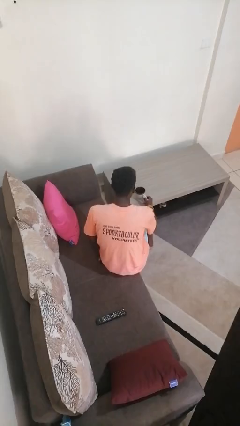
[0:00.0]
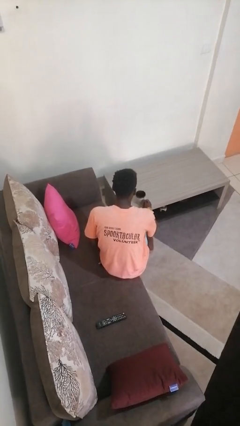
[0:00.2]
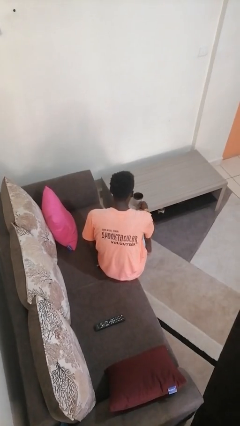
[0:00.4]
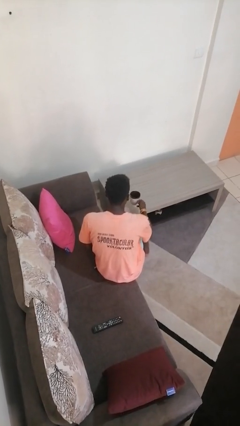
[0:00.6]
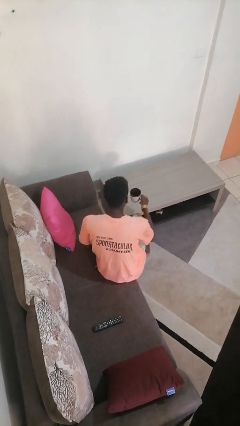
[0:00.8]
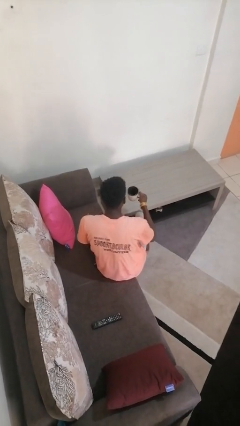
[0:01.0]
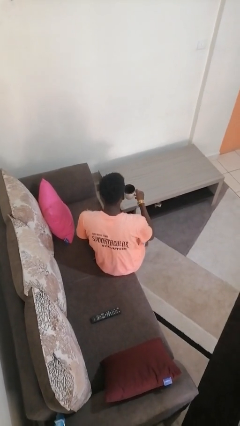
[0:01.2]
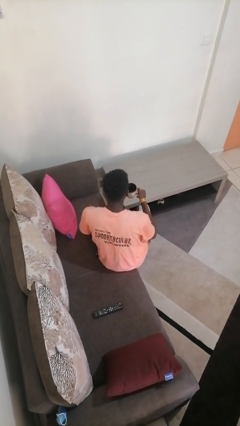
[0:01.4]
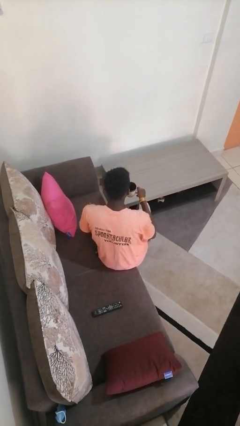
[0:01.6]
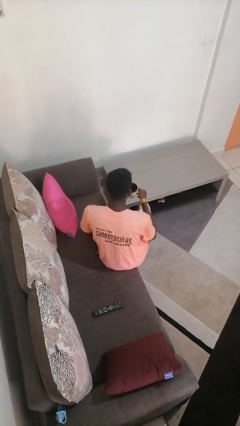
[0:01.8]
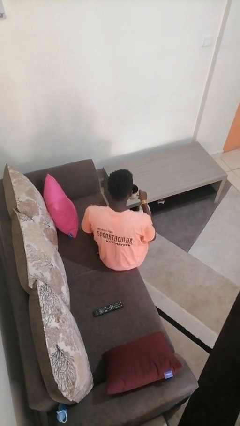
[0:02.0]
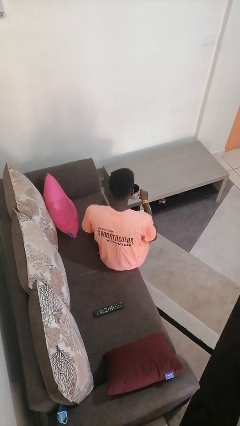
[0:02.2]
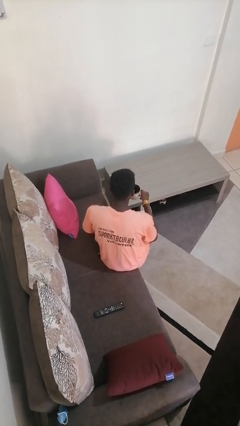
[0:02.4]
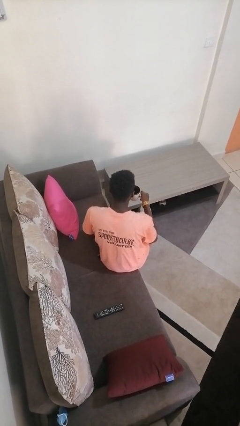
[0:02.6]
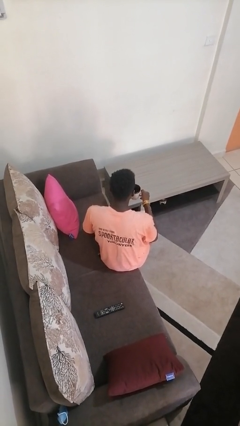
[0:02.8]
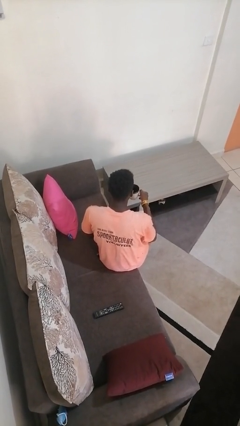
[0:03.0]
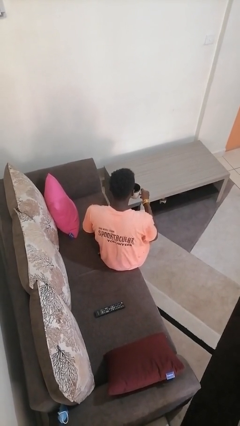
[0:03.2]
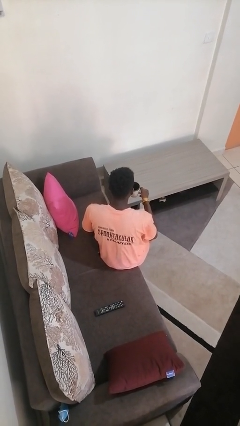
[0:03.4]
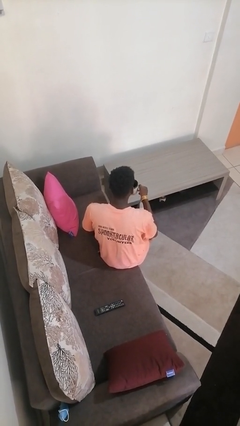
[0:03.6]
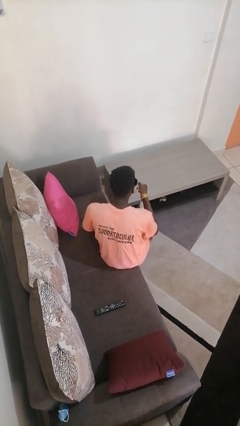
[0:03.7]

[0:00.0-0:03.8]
person picks up object from table

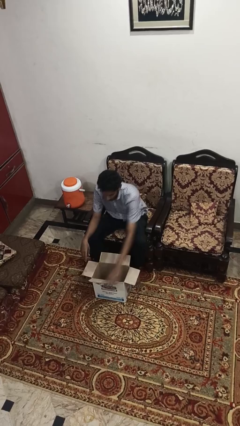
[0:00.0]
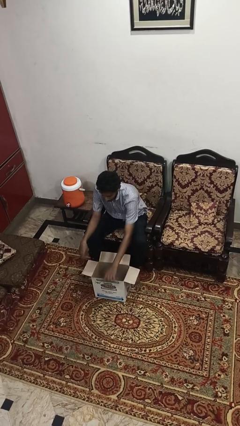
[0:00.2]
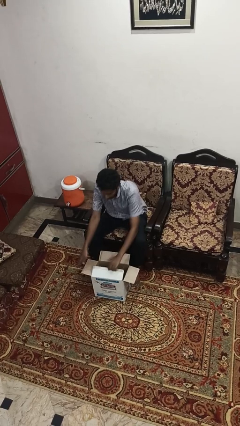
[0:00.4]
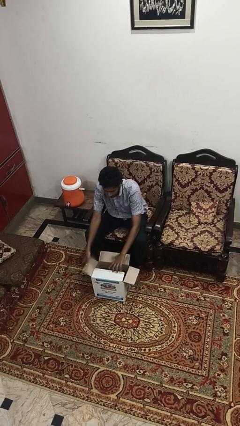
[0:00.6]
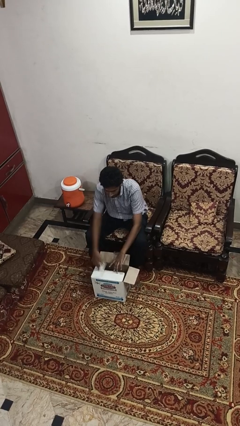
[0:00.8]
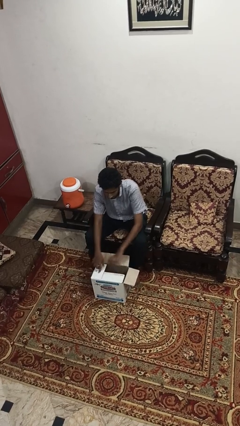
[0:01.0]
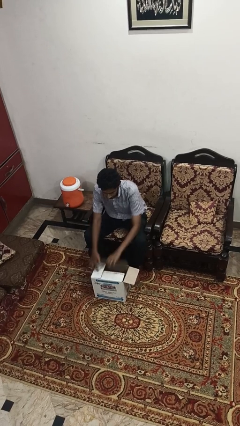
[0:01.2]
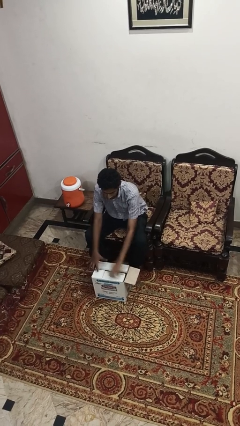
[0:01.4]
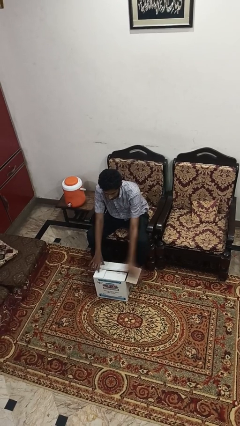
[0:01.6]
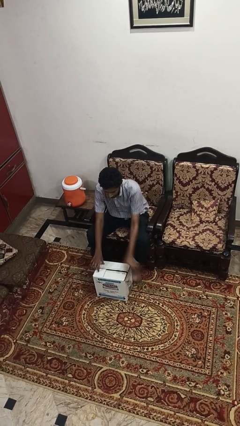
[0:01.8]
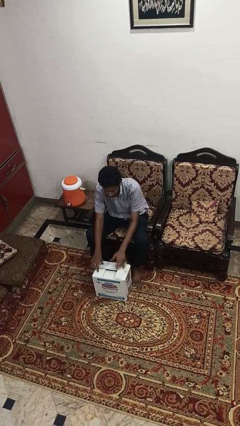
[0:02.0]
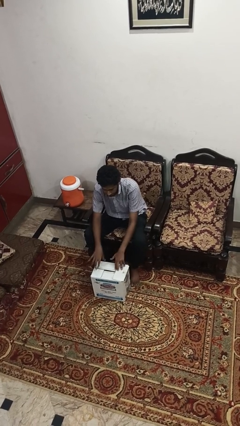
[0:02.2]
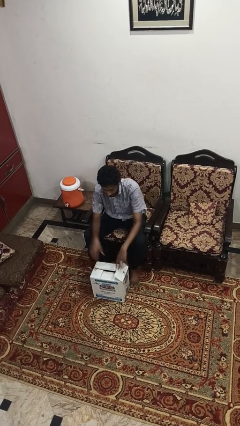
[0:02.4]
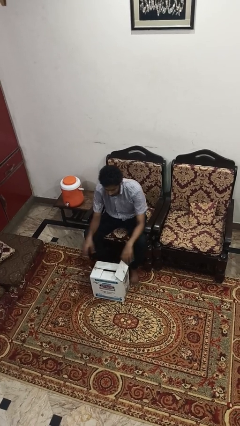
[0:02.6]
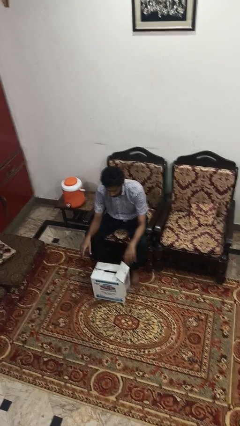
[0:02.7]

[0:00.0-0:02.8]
person closes box

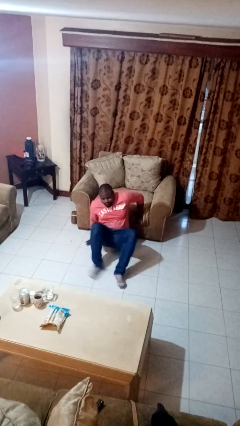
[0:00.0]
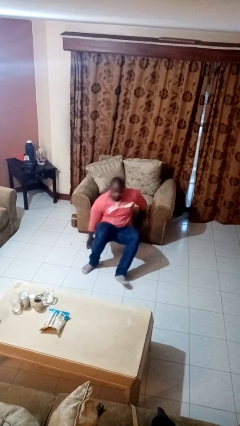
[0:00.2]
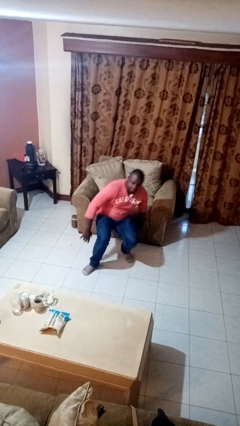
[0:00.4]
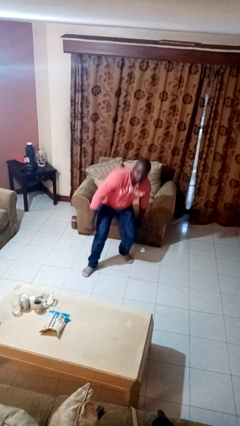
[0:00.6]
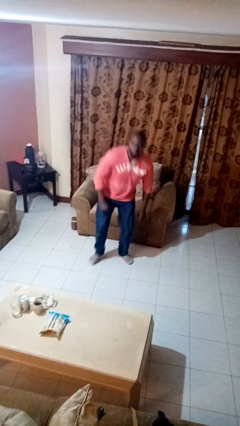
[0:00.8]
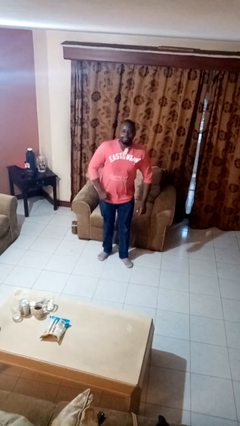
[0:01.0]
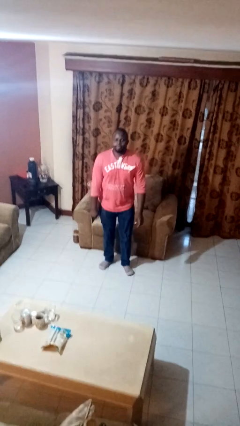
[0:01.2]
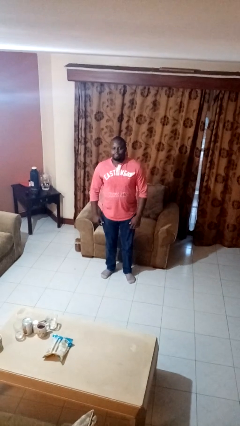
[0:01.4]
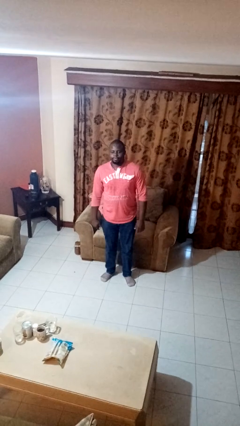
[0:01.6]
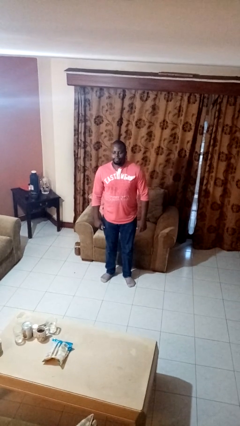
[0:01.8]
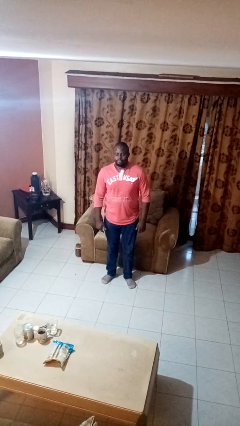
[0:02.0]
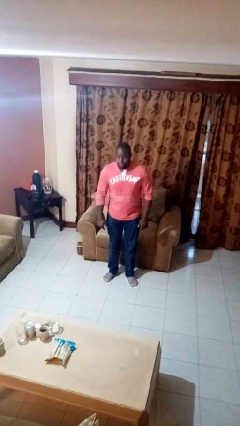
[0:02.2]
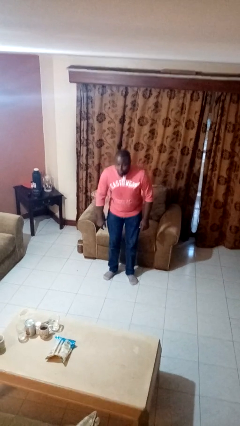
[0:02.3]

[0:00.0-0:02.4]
person stands up from floor

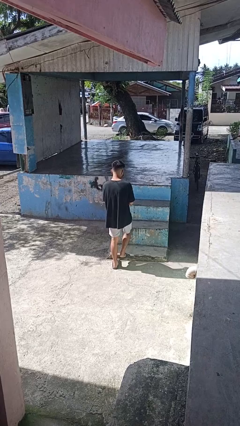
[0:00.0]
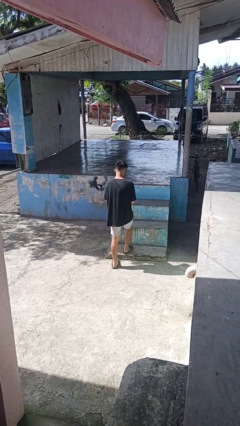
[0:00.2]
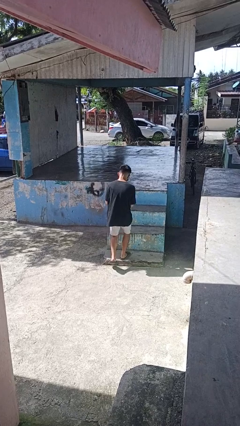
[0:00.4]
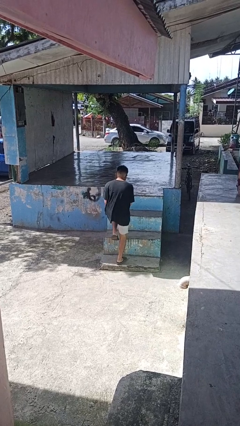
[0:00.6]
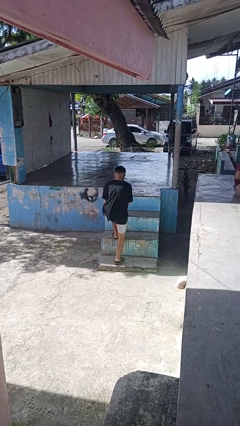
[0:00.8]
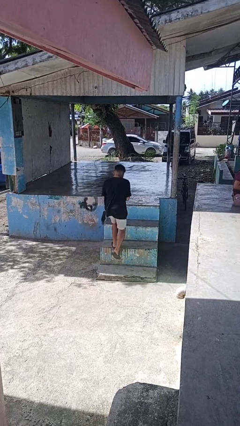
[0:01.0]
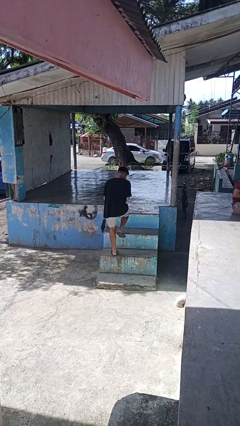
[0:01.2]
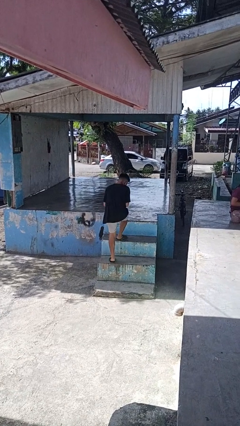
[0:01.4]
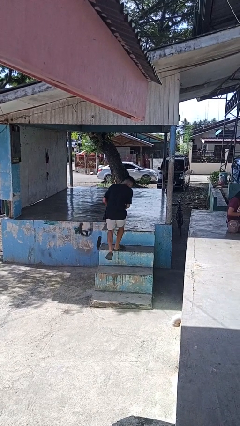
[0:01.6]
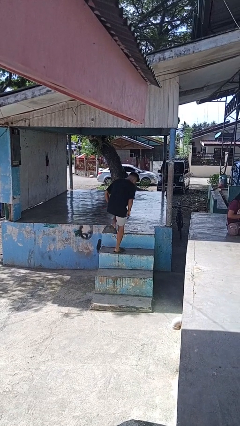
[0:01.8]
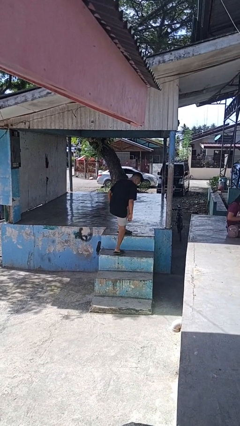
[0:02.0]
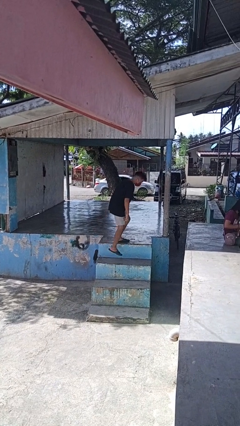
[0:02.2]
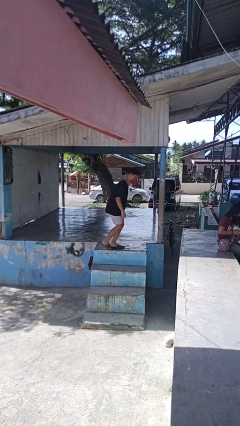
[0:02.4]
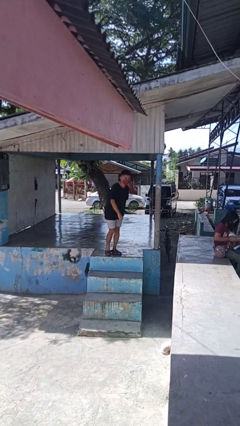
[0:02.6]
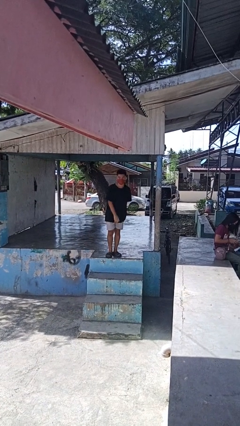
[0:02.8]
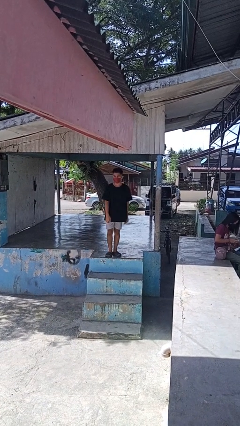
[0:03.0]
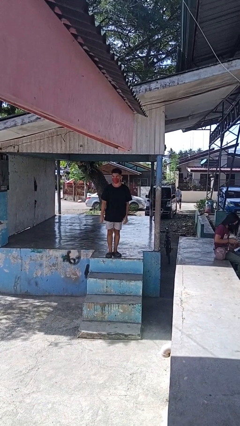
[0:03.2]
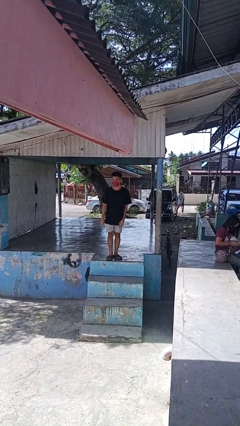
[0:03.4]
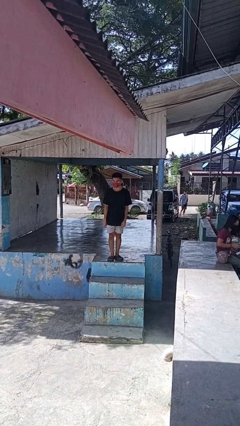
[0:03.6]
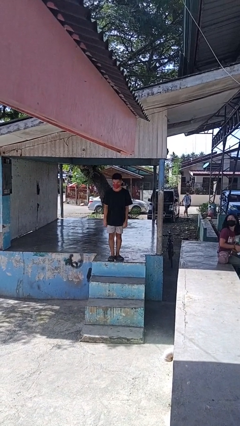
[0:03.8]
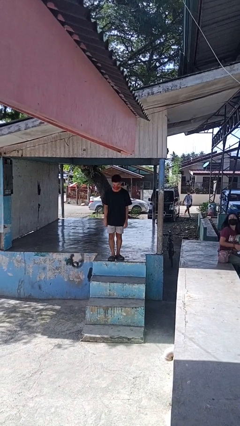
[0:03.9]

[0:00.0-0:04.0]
person climbs up stairs

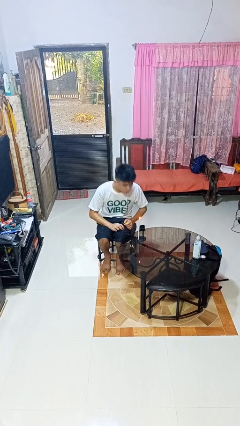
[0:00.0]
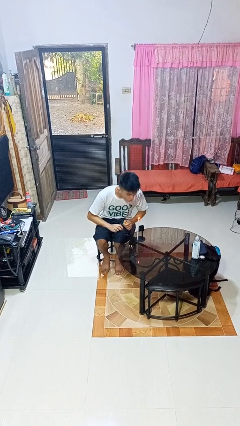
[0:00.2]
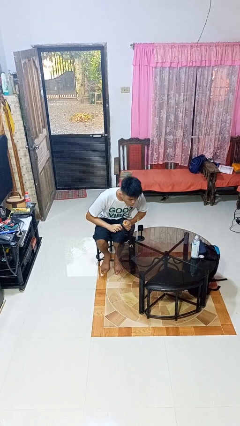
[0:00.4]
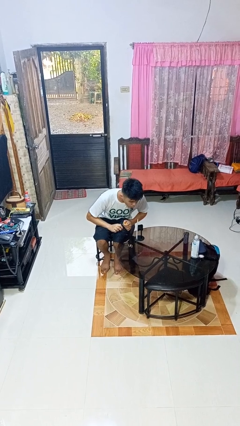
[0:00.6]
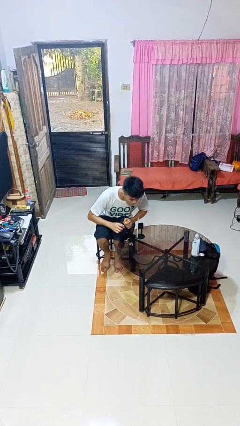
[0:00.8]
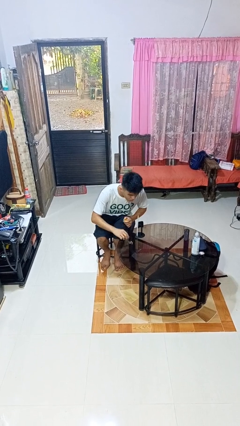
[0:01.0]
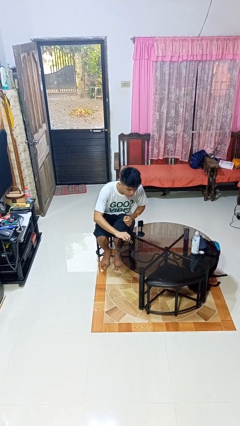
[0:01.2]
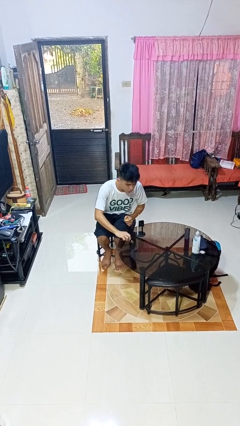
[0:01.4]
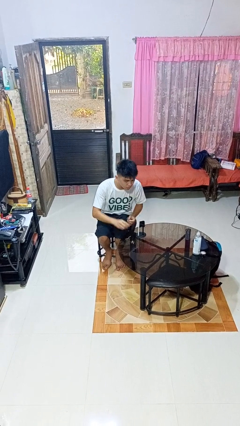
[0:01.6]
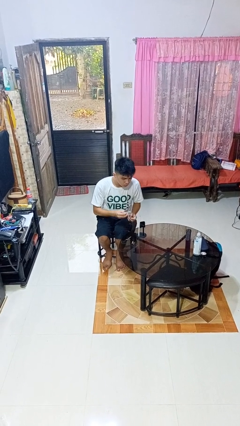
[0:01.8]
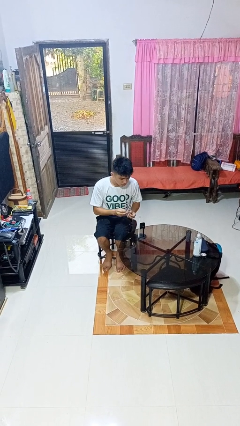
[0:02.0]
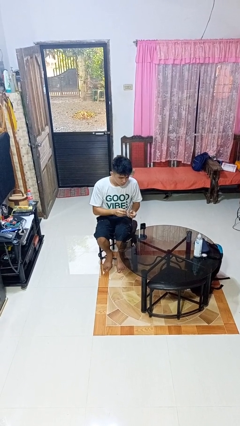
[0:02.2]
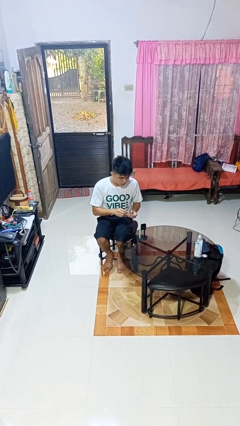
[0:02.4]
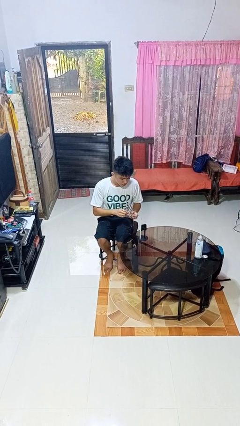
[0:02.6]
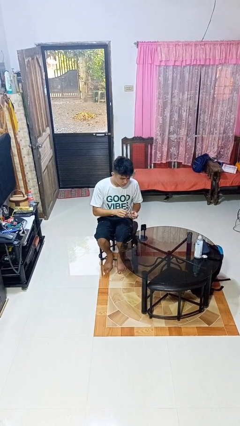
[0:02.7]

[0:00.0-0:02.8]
person extinguishes candle

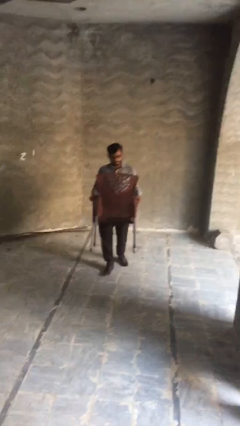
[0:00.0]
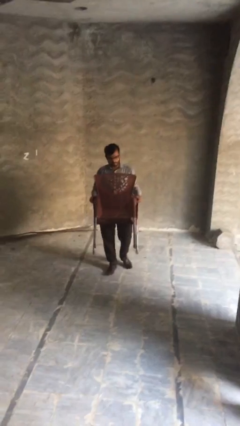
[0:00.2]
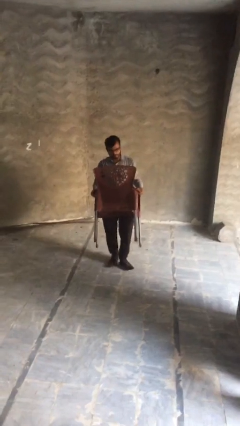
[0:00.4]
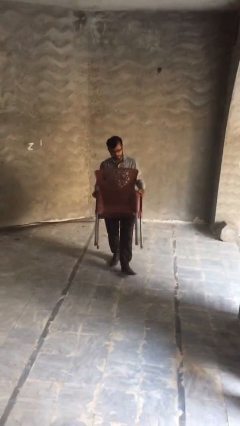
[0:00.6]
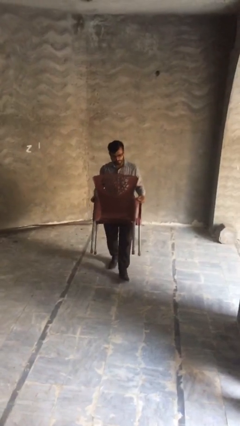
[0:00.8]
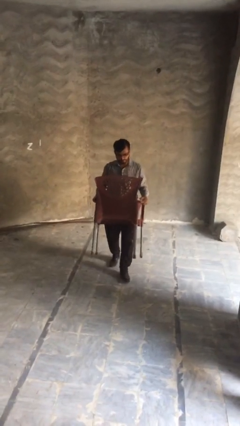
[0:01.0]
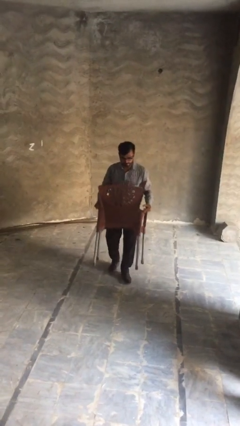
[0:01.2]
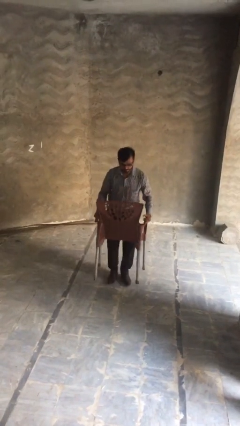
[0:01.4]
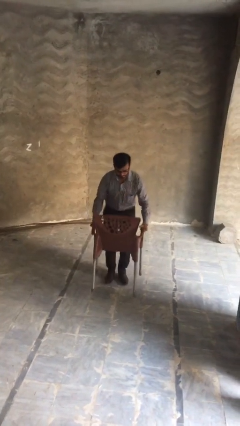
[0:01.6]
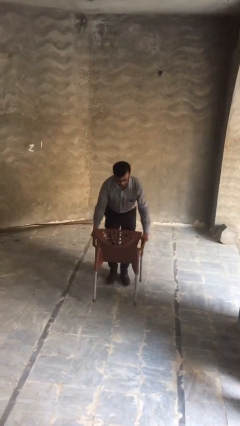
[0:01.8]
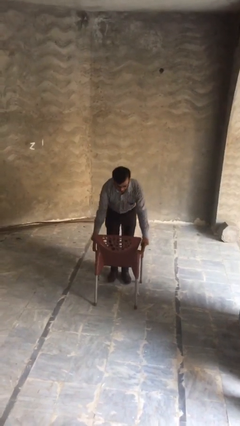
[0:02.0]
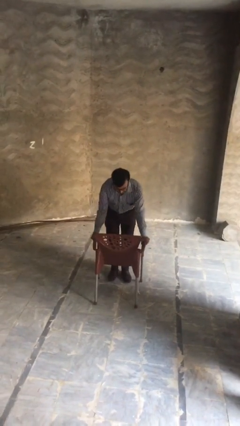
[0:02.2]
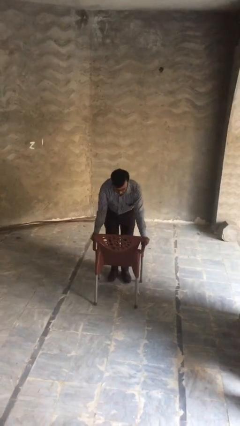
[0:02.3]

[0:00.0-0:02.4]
person puts down object on floor
